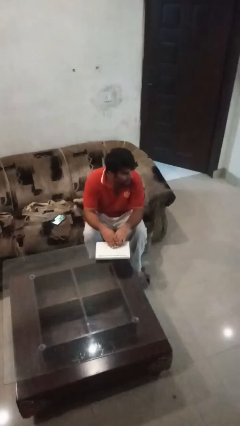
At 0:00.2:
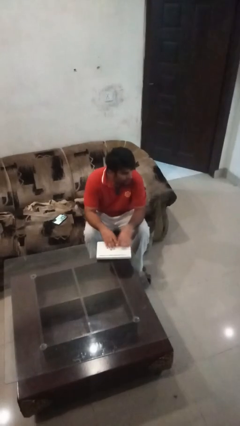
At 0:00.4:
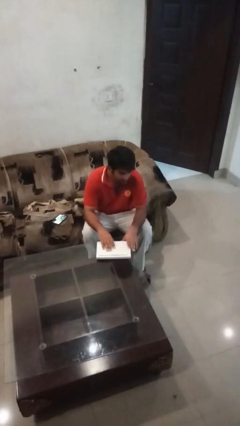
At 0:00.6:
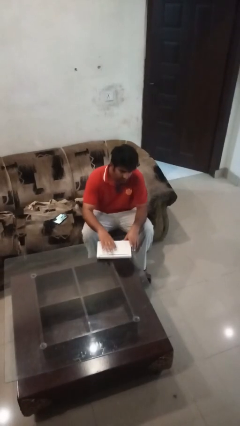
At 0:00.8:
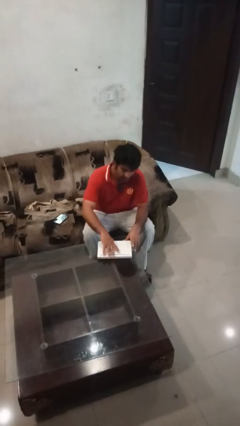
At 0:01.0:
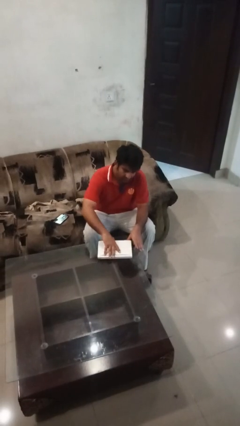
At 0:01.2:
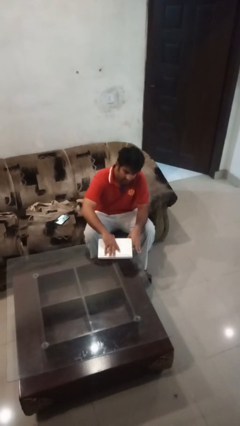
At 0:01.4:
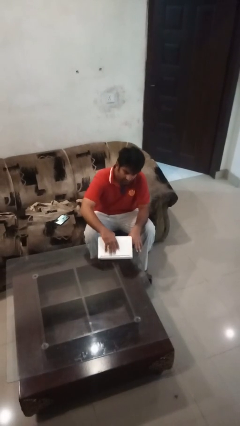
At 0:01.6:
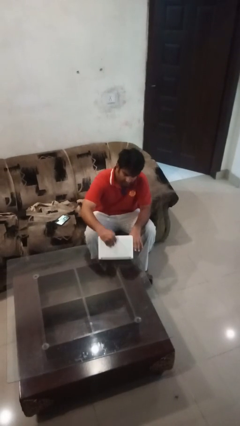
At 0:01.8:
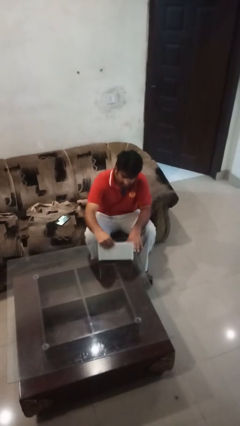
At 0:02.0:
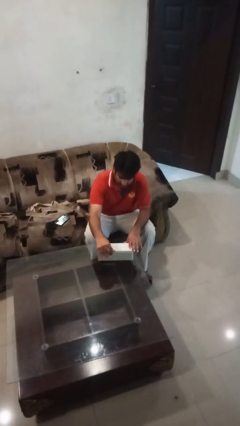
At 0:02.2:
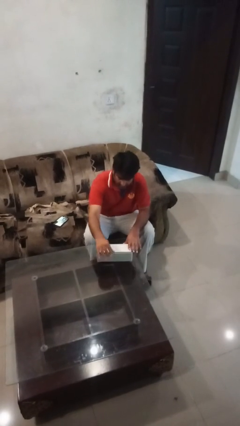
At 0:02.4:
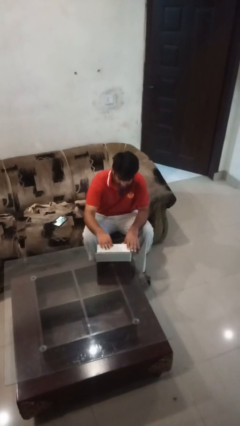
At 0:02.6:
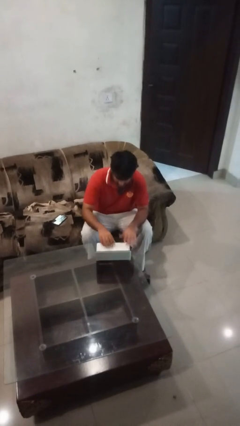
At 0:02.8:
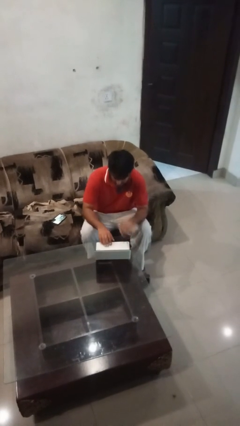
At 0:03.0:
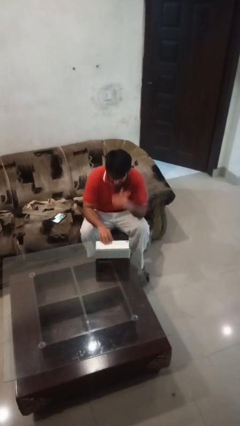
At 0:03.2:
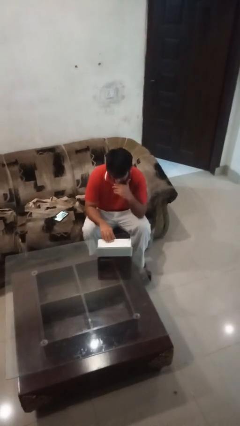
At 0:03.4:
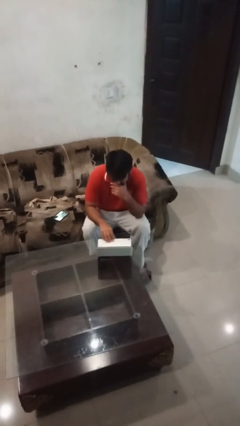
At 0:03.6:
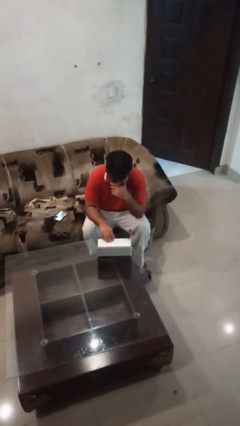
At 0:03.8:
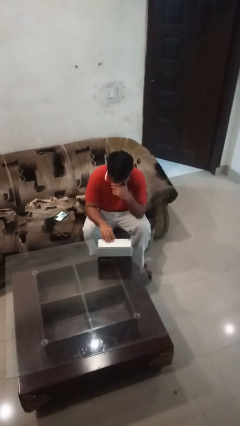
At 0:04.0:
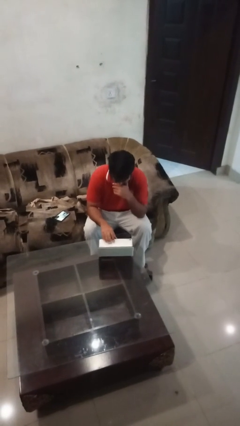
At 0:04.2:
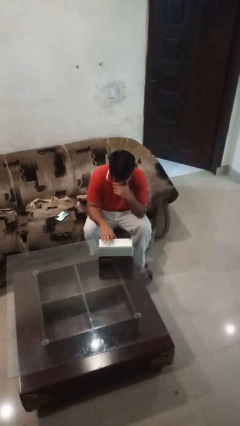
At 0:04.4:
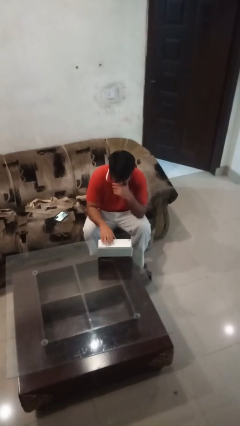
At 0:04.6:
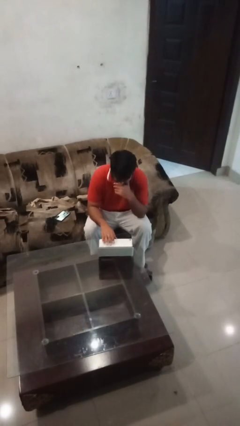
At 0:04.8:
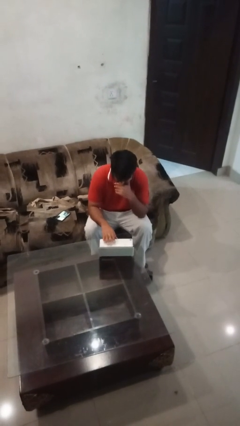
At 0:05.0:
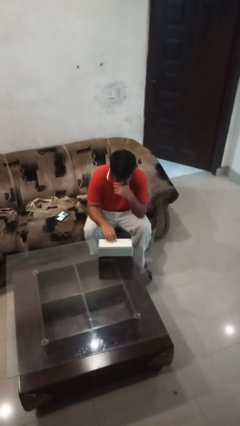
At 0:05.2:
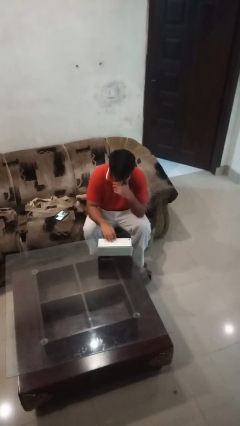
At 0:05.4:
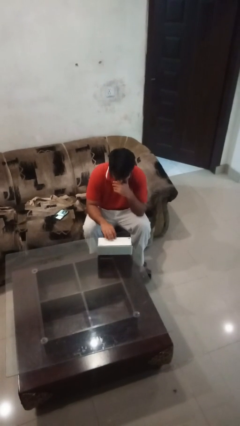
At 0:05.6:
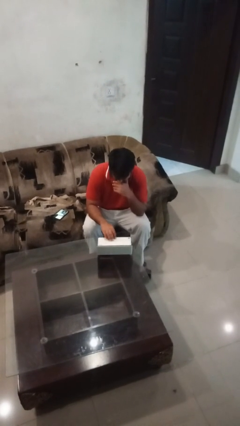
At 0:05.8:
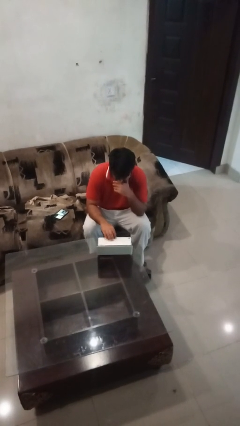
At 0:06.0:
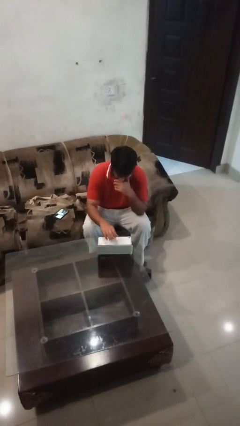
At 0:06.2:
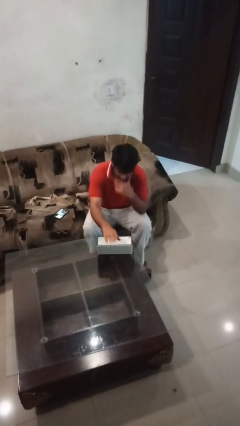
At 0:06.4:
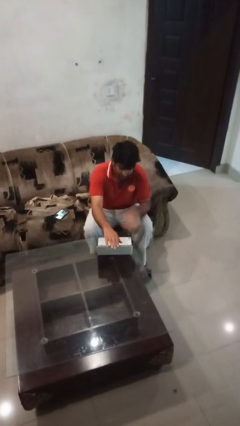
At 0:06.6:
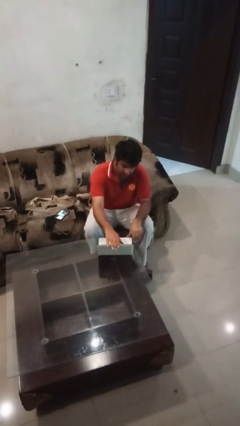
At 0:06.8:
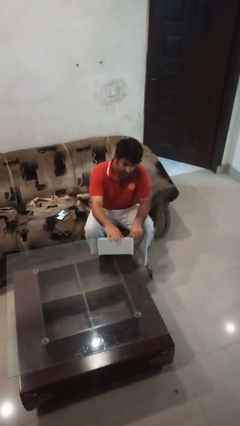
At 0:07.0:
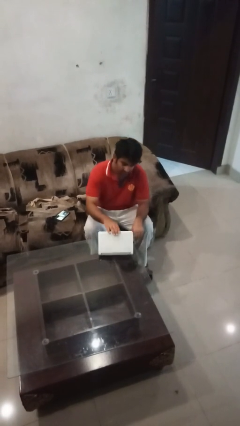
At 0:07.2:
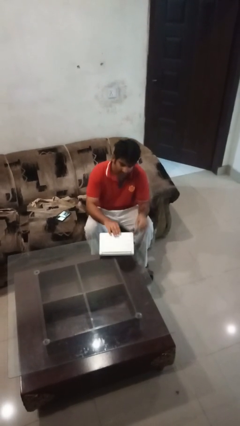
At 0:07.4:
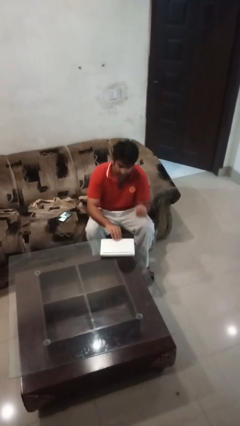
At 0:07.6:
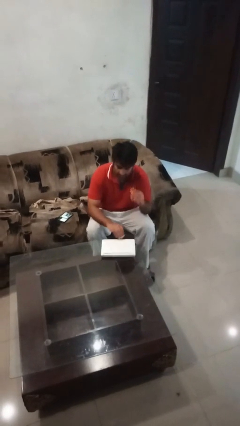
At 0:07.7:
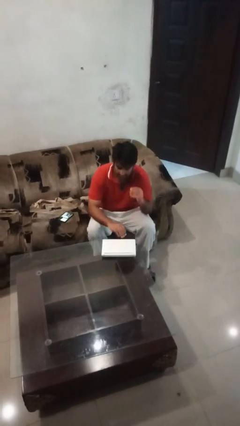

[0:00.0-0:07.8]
person interacts with laptop

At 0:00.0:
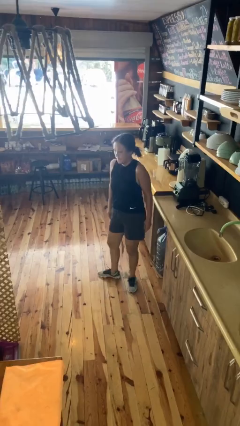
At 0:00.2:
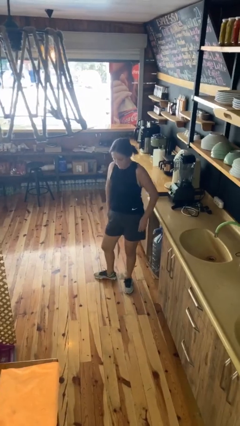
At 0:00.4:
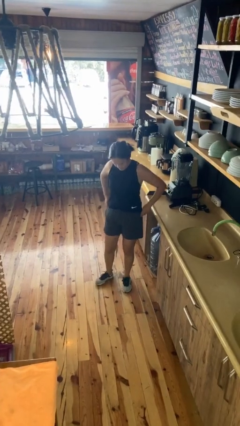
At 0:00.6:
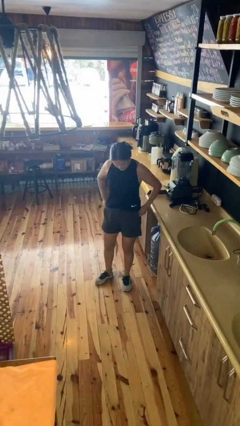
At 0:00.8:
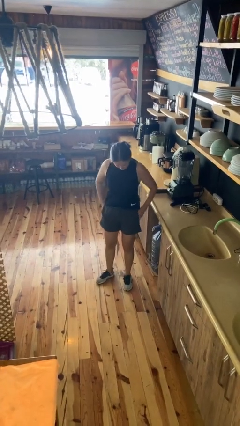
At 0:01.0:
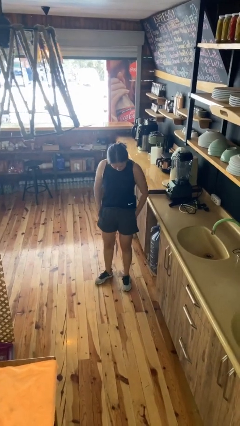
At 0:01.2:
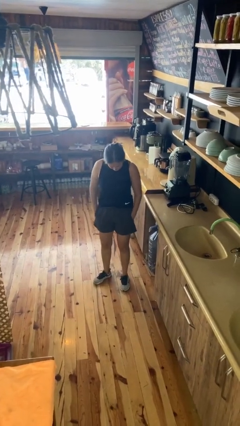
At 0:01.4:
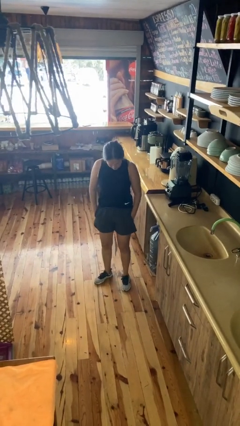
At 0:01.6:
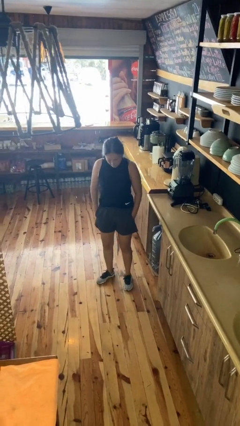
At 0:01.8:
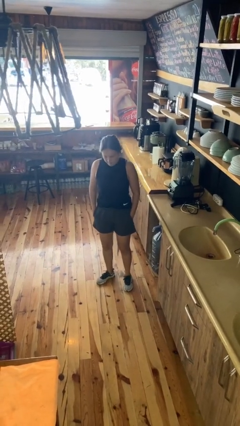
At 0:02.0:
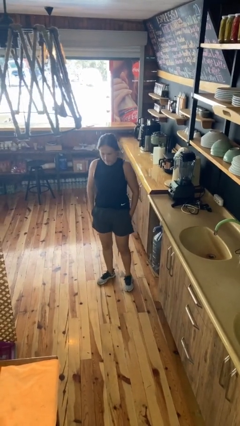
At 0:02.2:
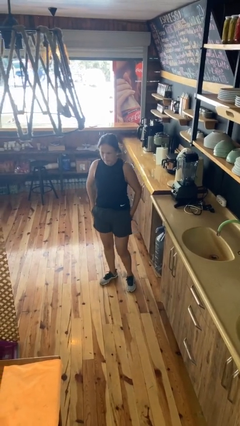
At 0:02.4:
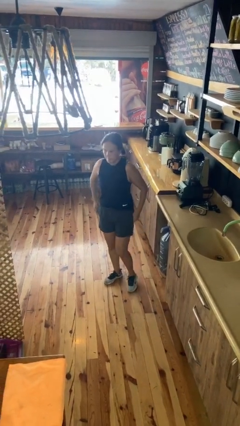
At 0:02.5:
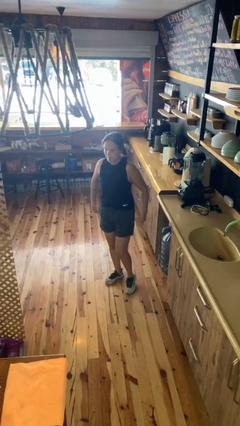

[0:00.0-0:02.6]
person puts hands in back pockets

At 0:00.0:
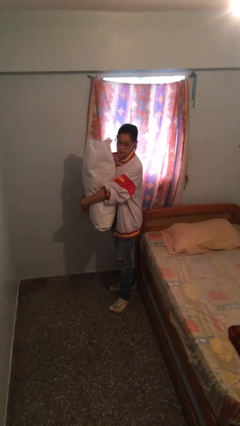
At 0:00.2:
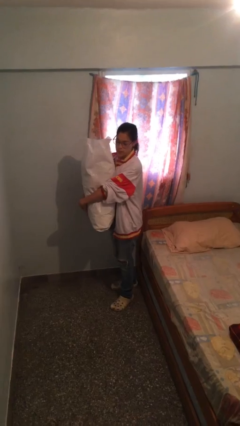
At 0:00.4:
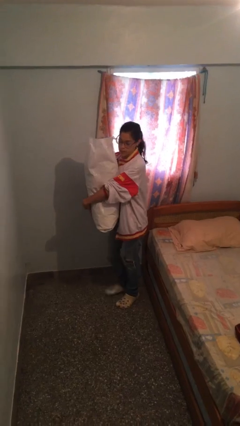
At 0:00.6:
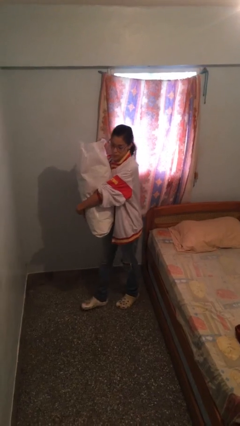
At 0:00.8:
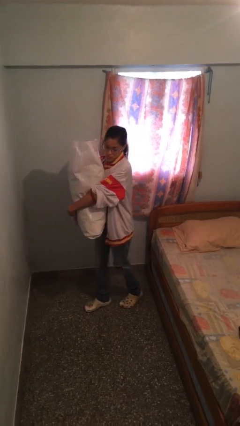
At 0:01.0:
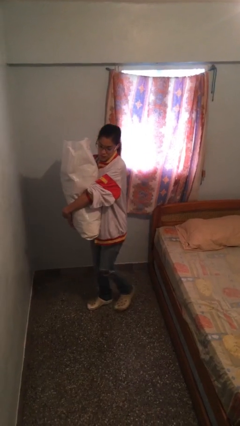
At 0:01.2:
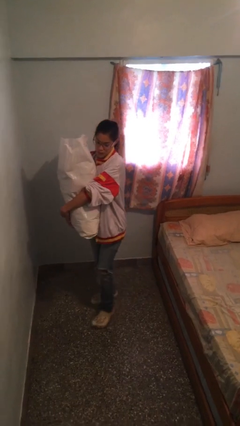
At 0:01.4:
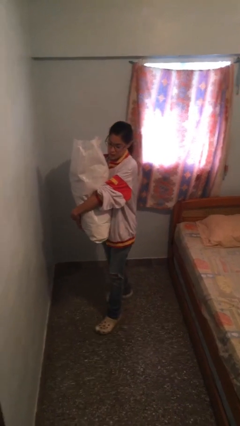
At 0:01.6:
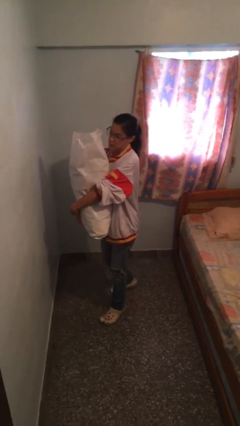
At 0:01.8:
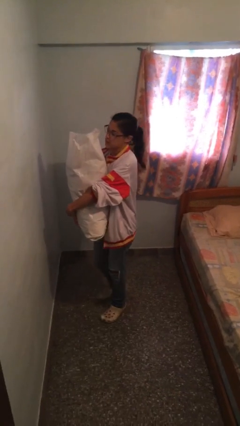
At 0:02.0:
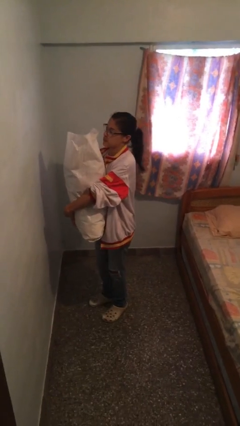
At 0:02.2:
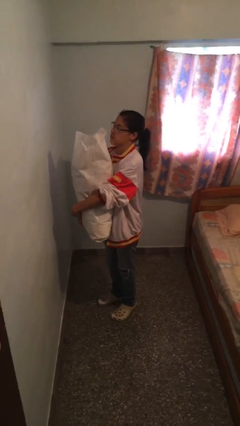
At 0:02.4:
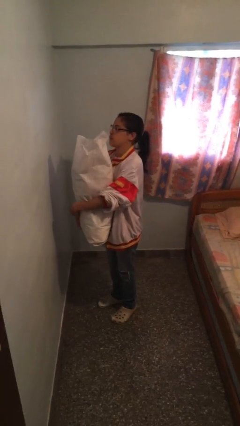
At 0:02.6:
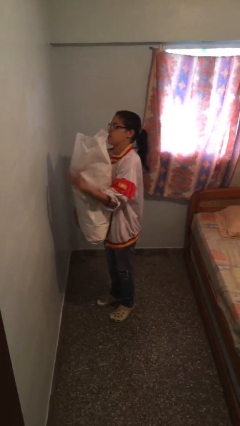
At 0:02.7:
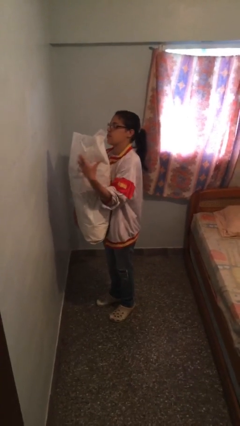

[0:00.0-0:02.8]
person carries heavy object

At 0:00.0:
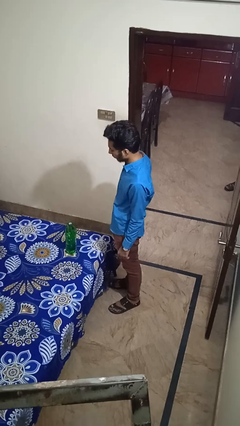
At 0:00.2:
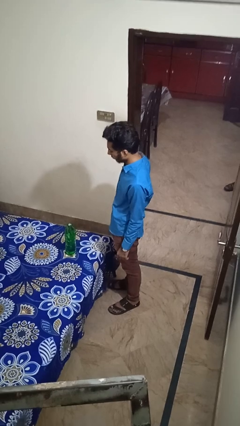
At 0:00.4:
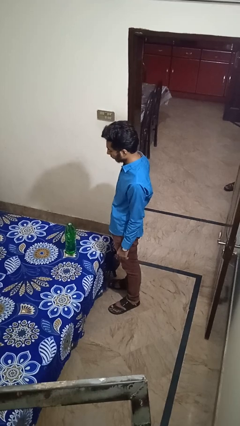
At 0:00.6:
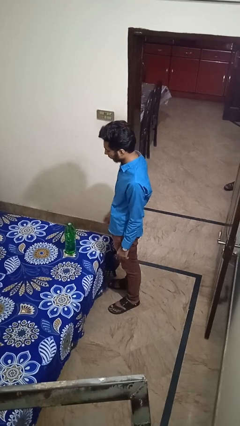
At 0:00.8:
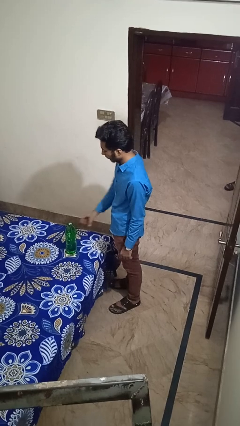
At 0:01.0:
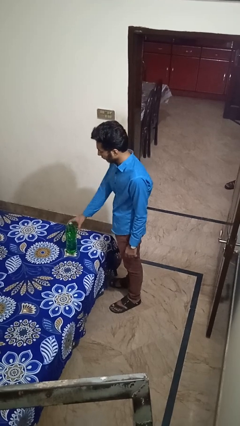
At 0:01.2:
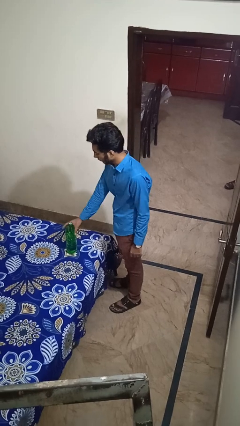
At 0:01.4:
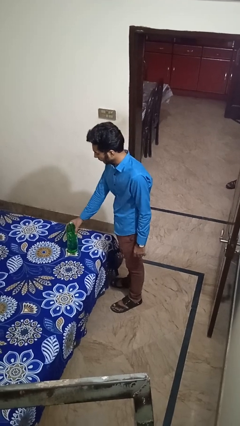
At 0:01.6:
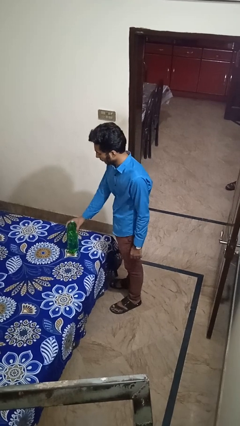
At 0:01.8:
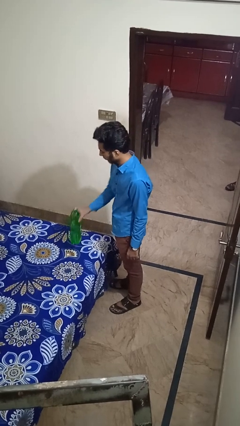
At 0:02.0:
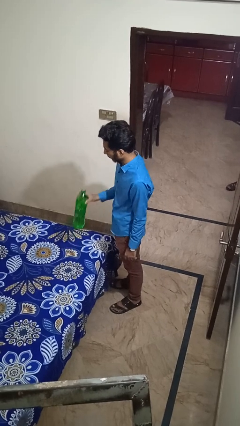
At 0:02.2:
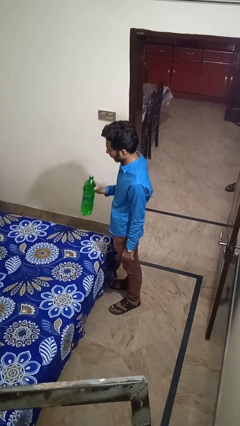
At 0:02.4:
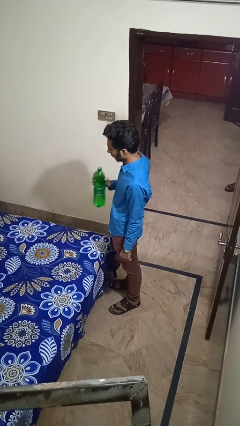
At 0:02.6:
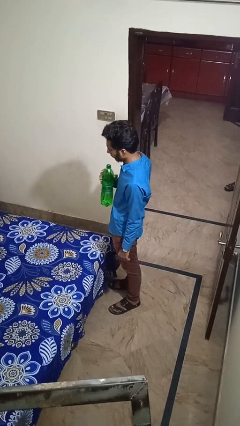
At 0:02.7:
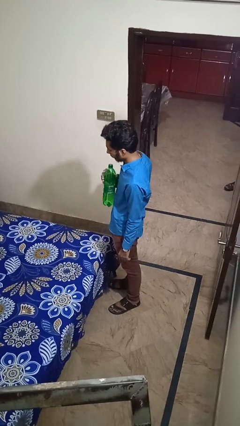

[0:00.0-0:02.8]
person picks up object from bed

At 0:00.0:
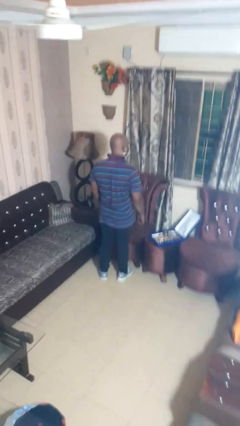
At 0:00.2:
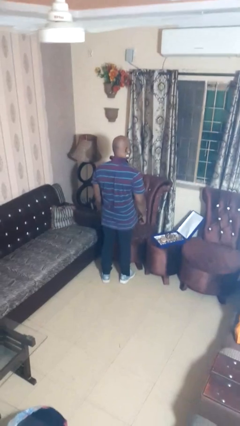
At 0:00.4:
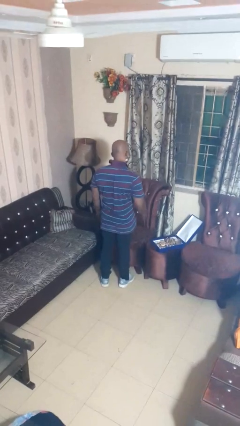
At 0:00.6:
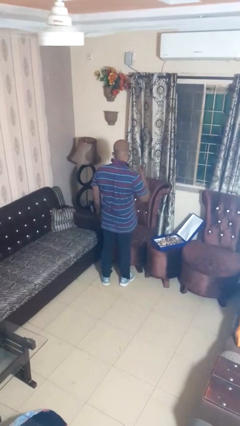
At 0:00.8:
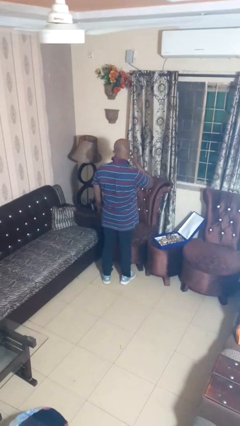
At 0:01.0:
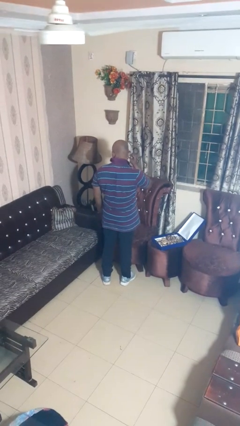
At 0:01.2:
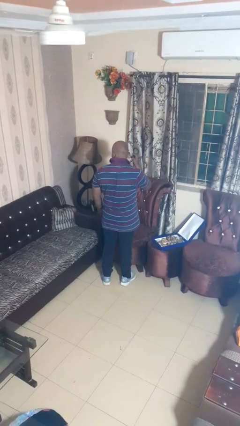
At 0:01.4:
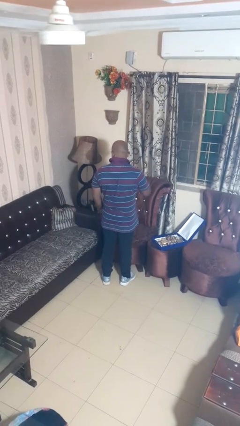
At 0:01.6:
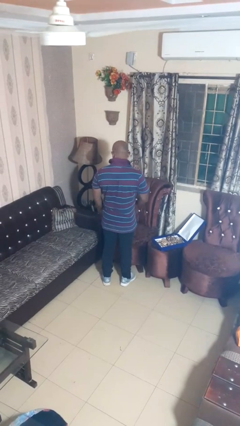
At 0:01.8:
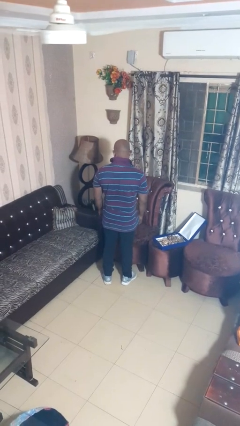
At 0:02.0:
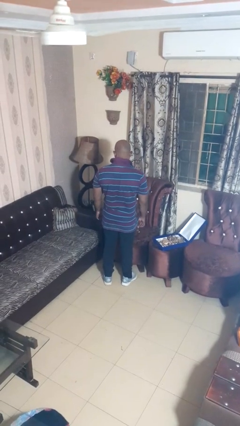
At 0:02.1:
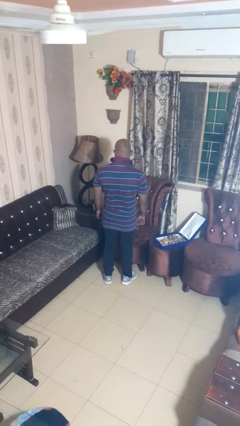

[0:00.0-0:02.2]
person takes off earrings
